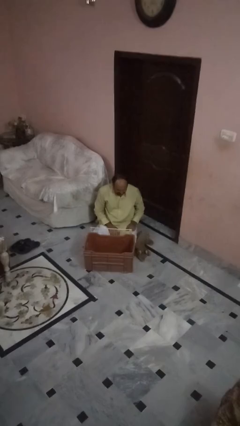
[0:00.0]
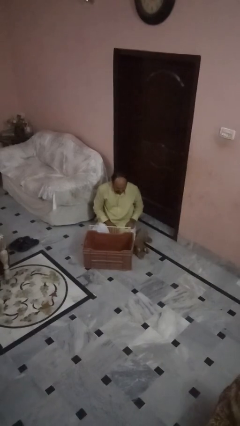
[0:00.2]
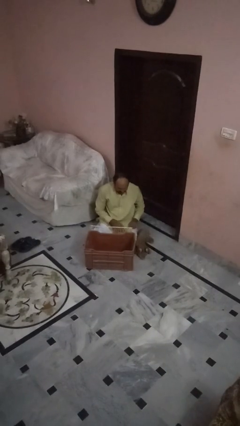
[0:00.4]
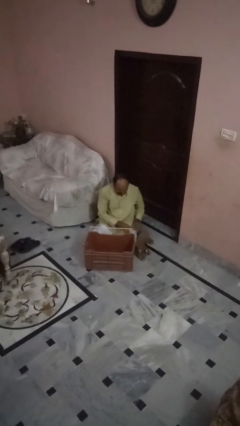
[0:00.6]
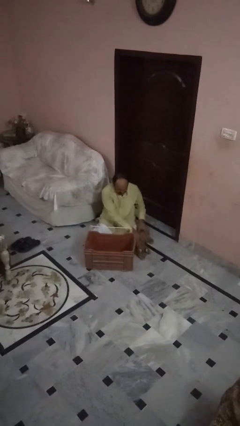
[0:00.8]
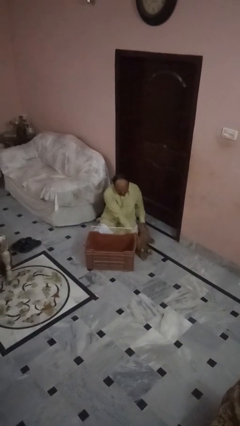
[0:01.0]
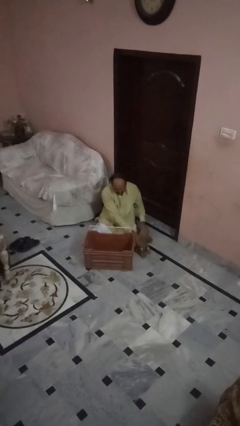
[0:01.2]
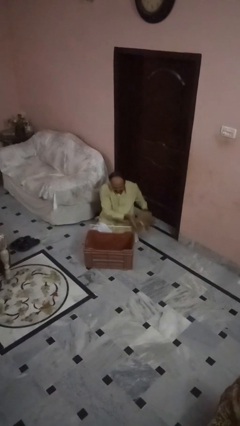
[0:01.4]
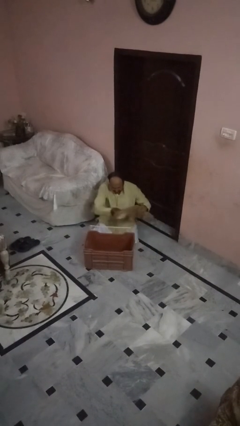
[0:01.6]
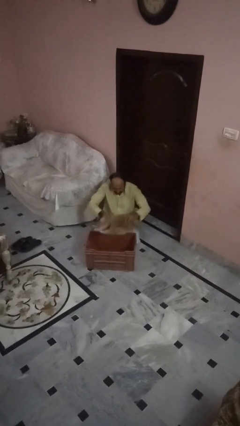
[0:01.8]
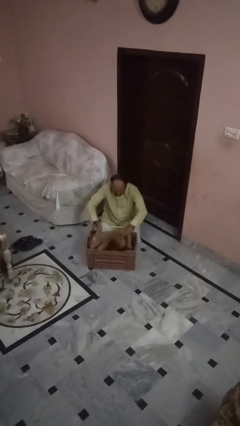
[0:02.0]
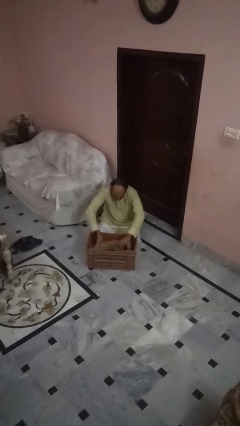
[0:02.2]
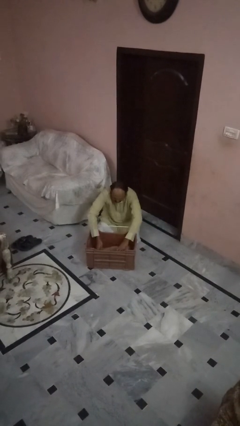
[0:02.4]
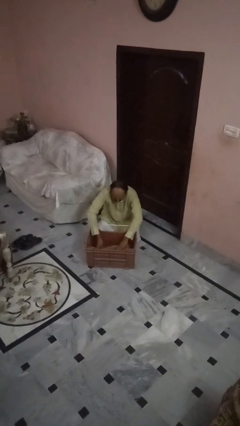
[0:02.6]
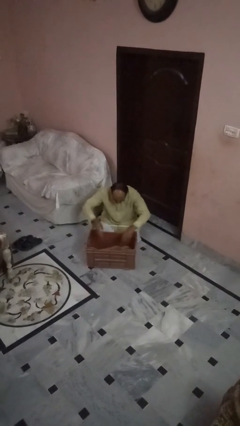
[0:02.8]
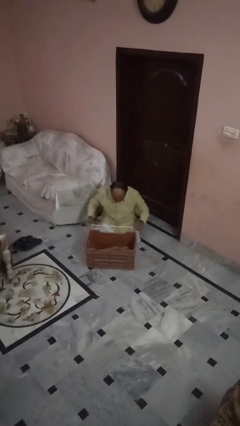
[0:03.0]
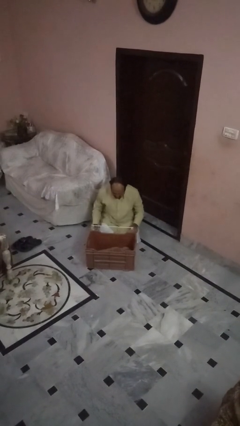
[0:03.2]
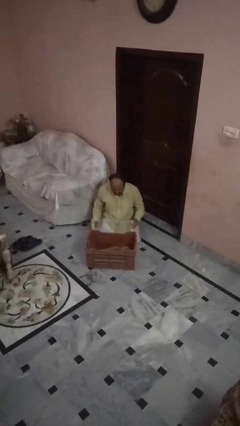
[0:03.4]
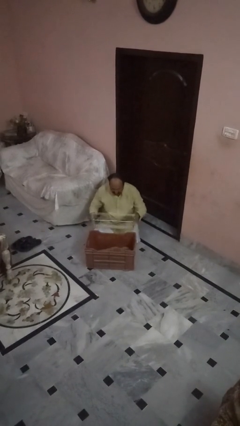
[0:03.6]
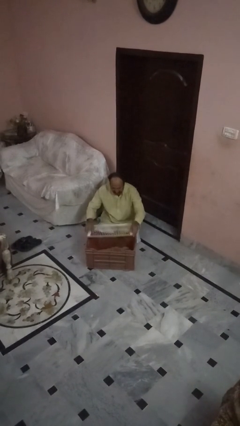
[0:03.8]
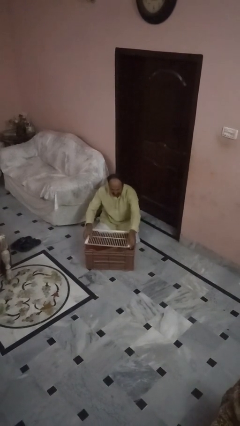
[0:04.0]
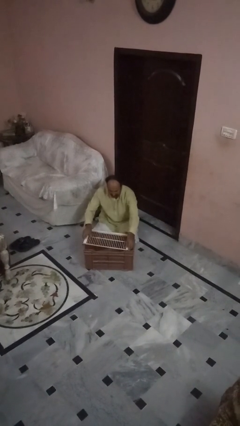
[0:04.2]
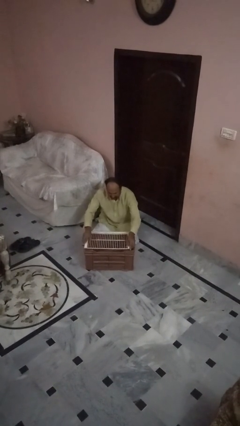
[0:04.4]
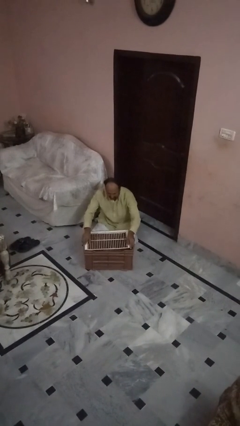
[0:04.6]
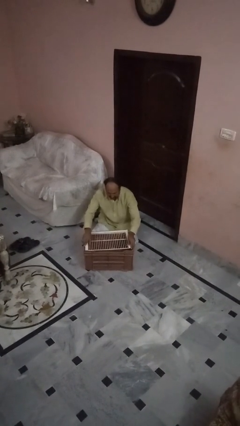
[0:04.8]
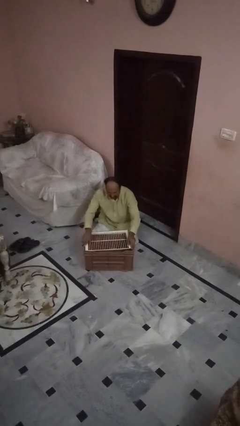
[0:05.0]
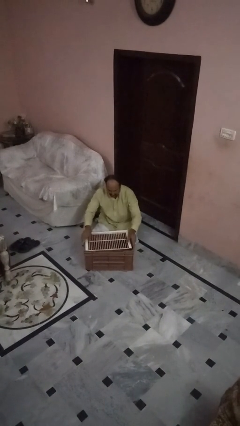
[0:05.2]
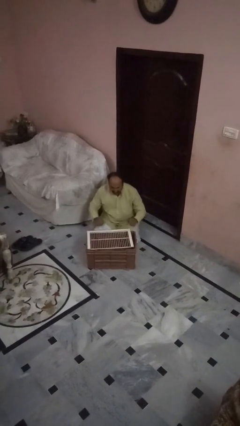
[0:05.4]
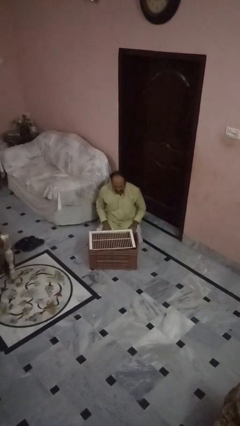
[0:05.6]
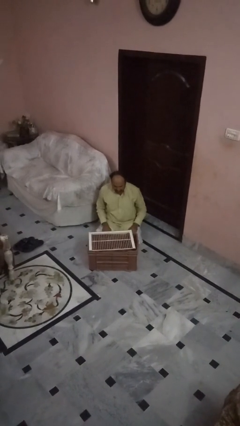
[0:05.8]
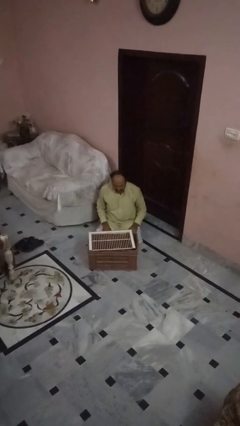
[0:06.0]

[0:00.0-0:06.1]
person crates dog

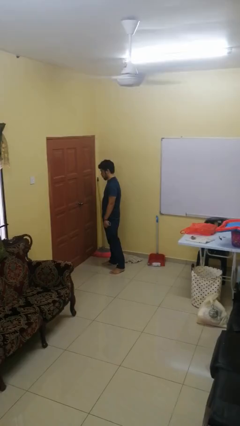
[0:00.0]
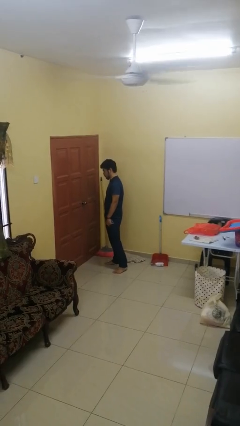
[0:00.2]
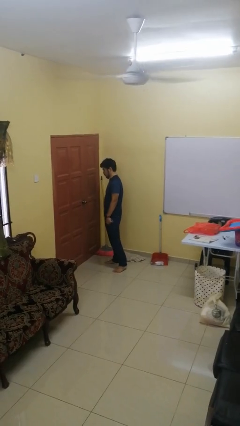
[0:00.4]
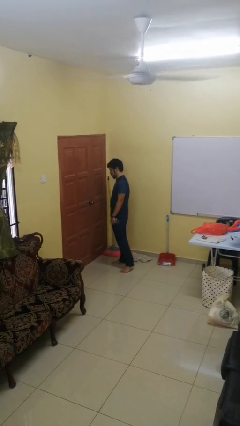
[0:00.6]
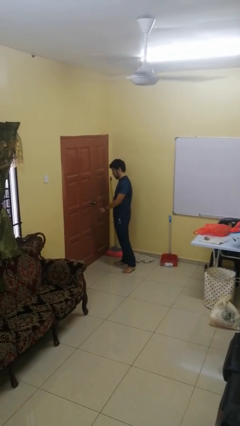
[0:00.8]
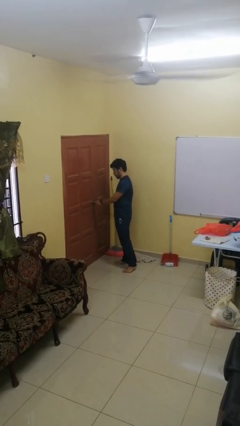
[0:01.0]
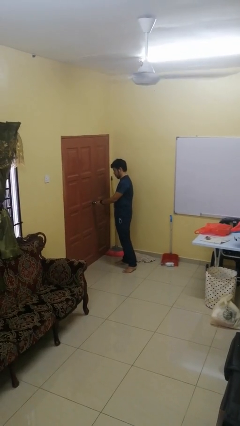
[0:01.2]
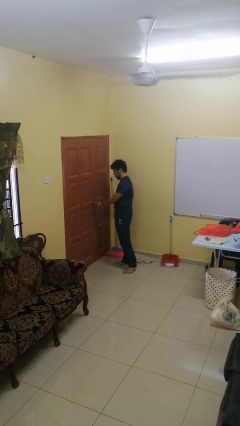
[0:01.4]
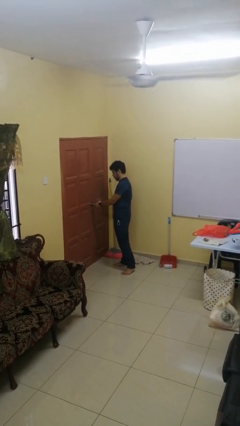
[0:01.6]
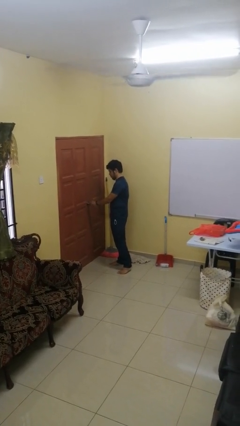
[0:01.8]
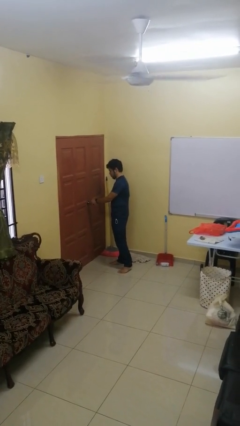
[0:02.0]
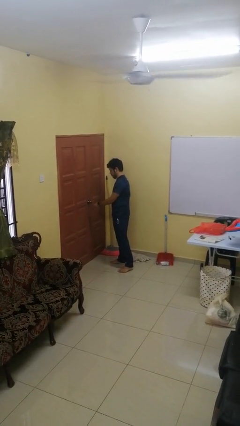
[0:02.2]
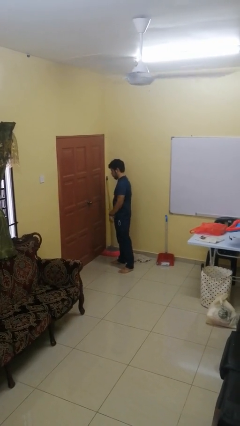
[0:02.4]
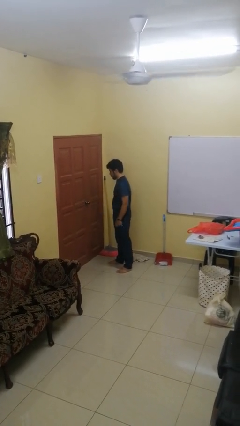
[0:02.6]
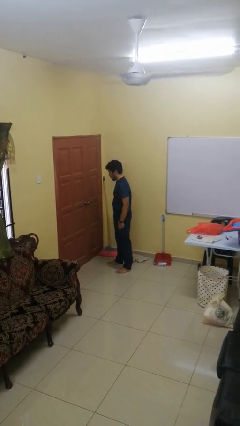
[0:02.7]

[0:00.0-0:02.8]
person unlocks door with keys

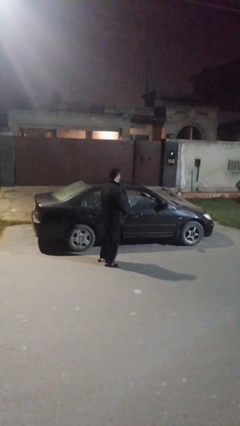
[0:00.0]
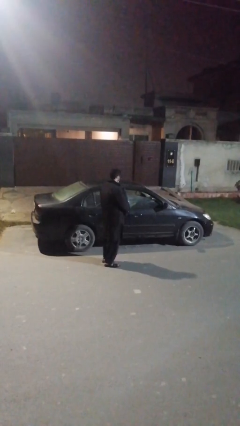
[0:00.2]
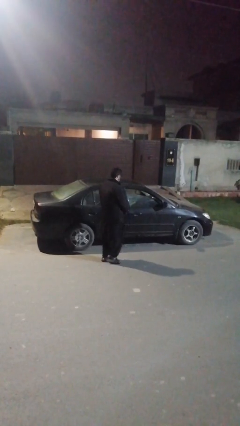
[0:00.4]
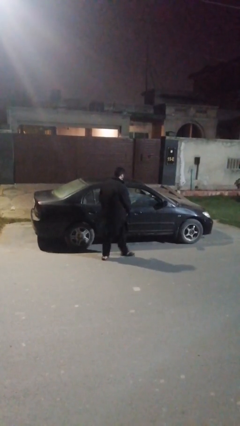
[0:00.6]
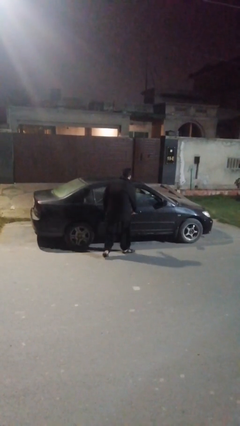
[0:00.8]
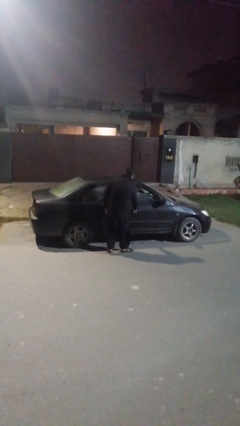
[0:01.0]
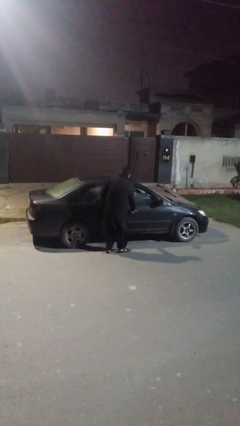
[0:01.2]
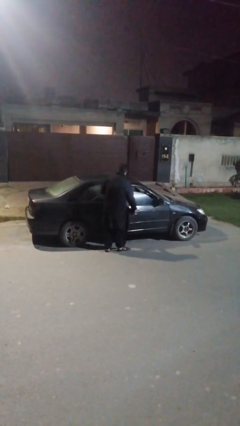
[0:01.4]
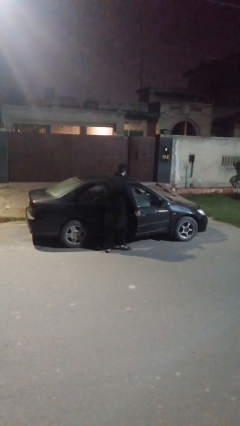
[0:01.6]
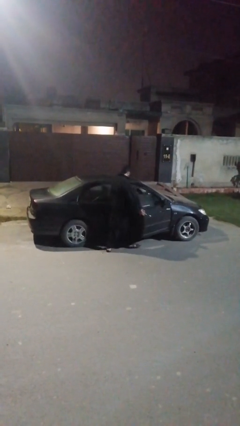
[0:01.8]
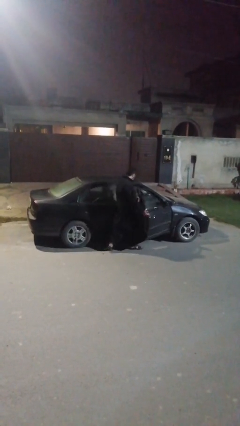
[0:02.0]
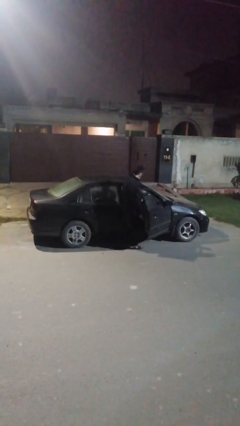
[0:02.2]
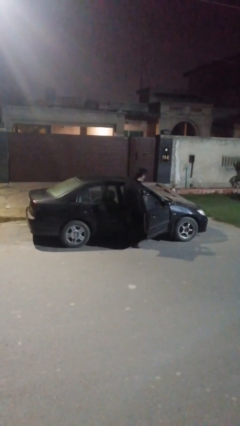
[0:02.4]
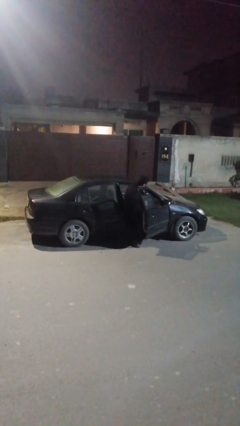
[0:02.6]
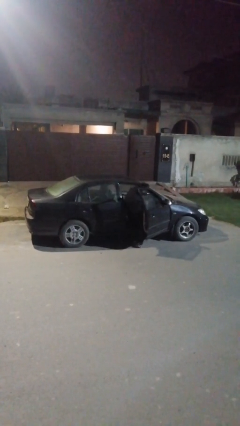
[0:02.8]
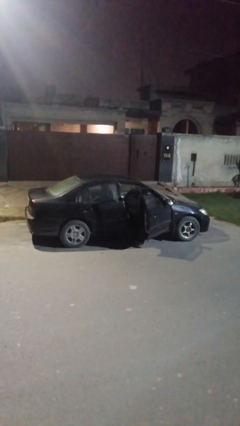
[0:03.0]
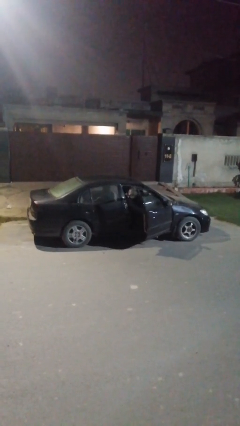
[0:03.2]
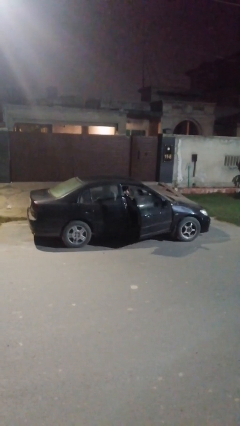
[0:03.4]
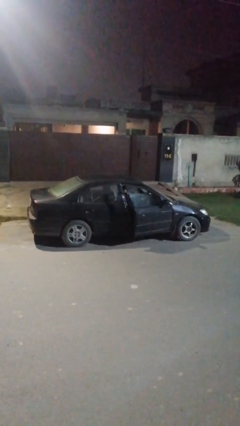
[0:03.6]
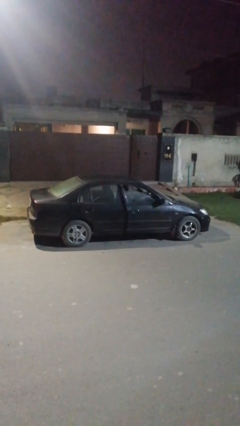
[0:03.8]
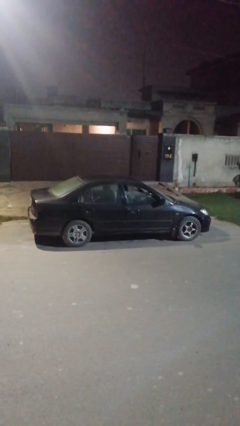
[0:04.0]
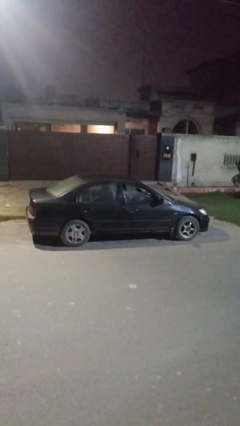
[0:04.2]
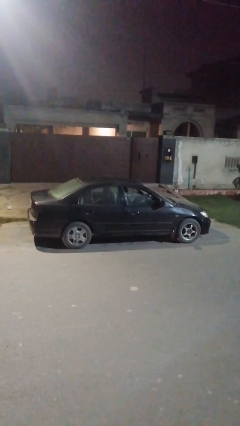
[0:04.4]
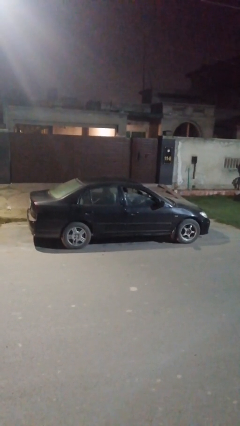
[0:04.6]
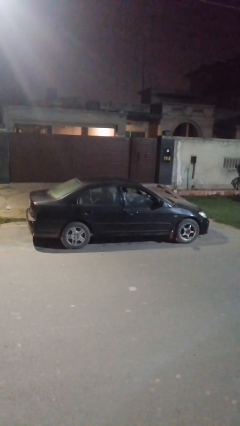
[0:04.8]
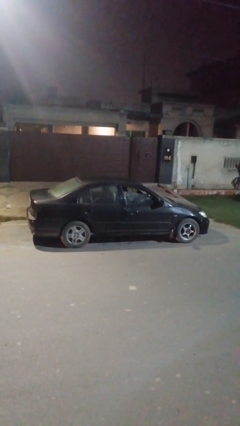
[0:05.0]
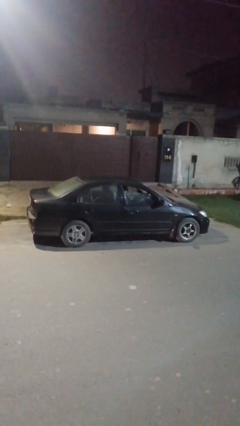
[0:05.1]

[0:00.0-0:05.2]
car picks up person

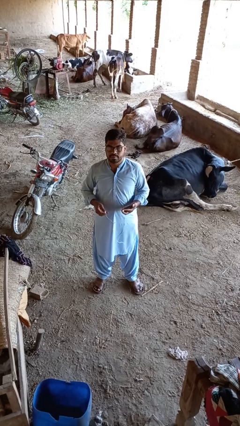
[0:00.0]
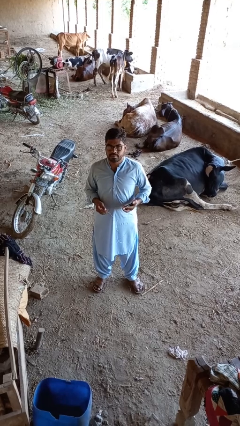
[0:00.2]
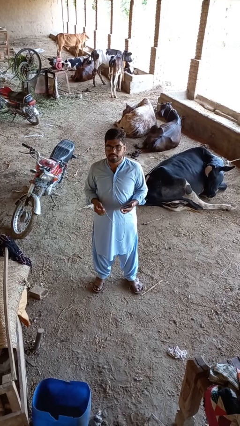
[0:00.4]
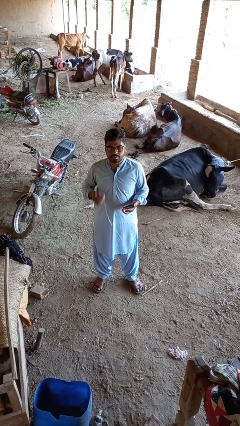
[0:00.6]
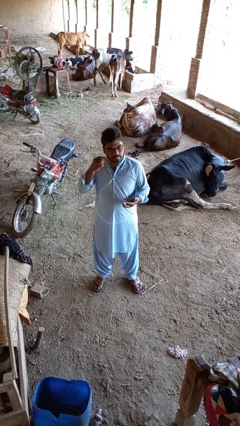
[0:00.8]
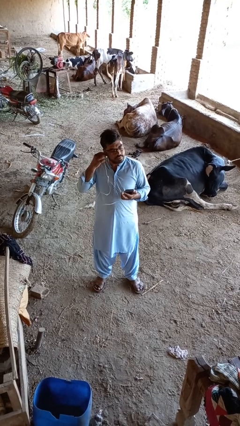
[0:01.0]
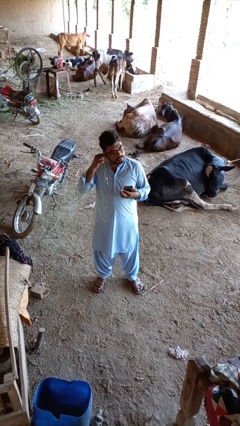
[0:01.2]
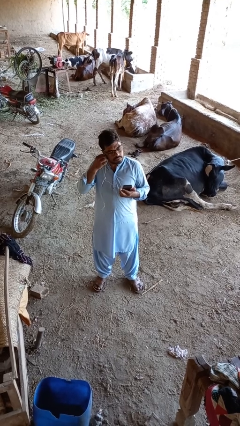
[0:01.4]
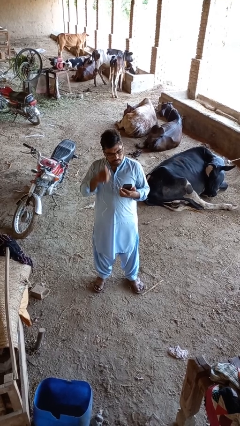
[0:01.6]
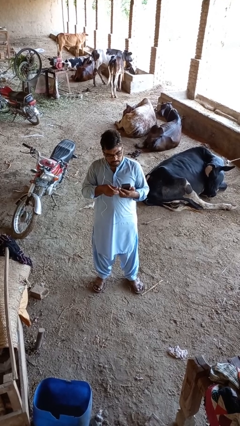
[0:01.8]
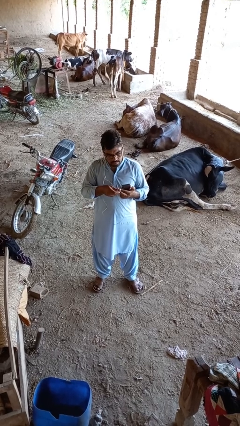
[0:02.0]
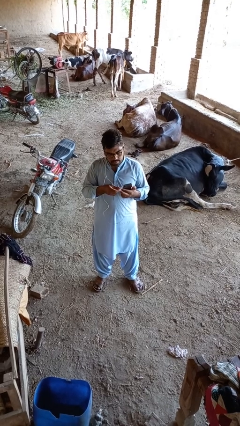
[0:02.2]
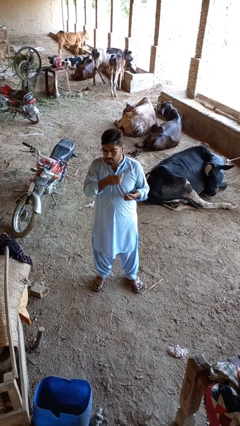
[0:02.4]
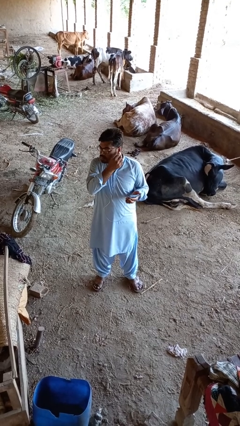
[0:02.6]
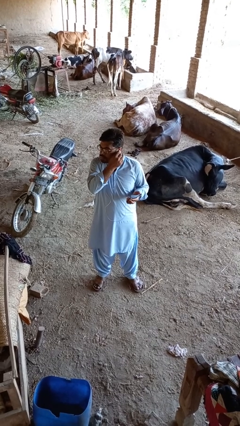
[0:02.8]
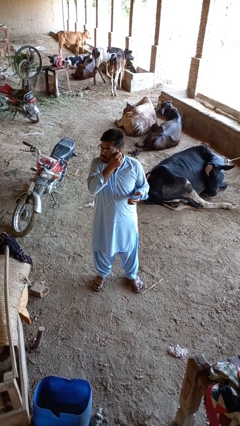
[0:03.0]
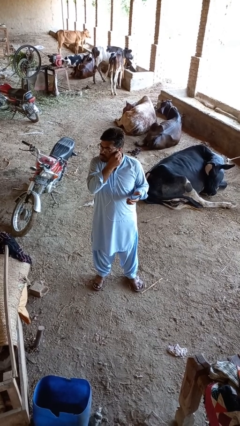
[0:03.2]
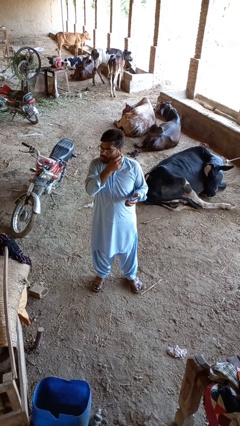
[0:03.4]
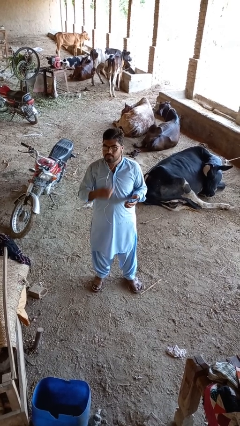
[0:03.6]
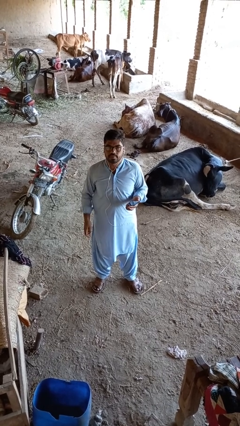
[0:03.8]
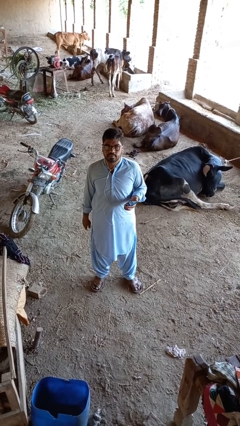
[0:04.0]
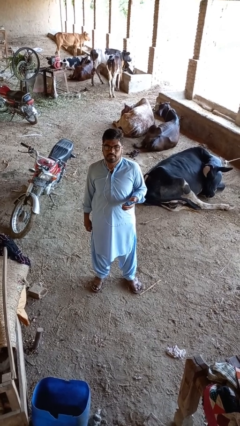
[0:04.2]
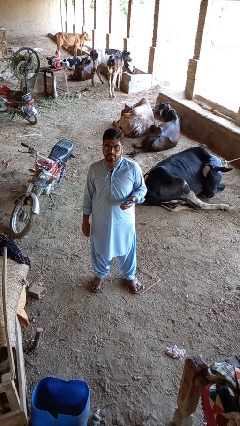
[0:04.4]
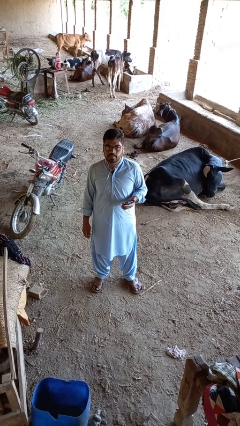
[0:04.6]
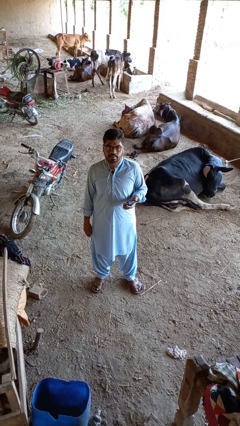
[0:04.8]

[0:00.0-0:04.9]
person puts on headphones
